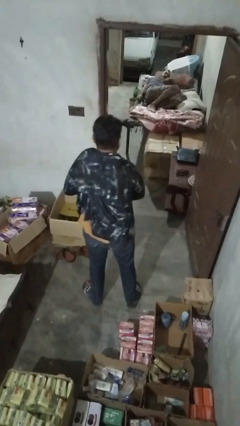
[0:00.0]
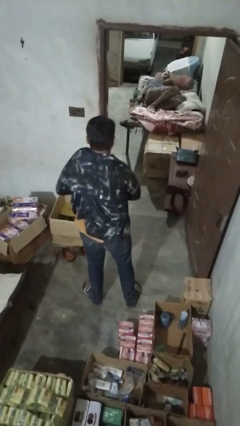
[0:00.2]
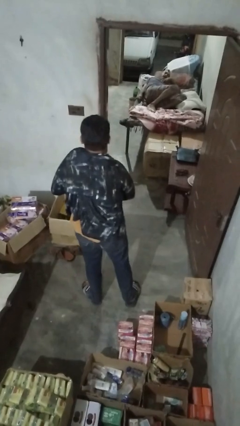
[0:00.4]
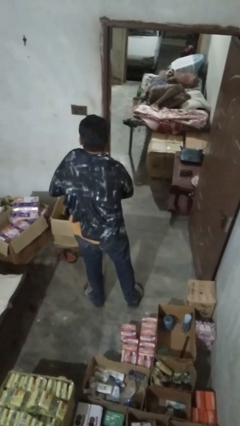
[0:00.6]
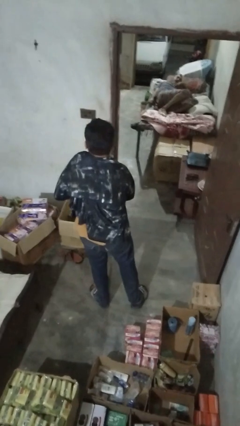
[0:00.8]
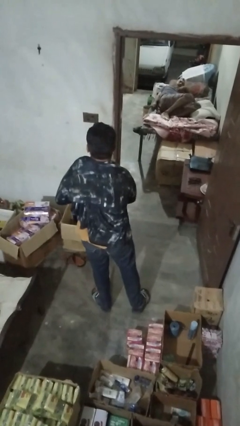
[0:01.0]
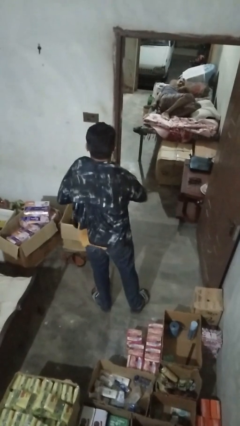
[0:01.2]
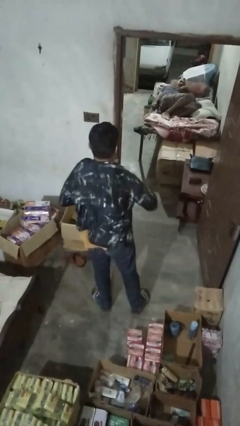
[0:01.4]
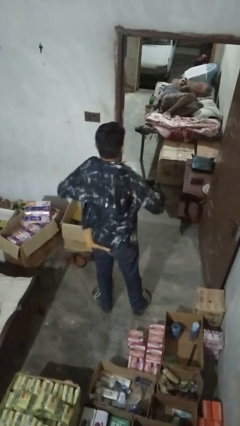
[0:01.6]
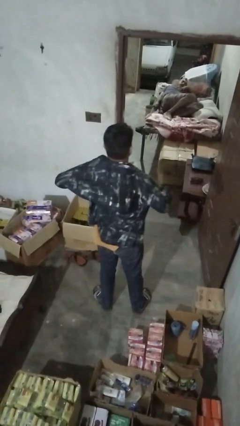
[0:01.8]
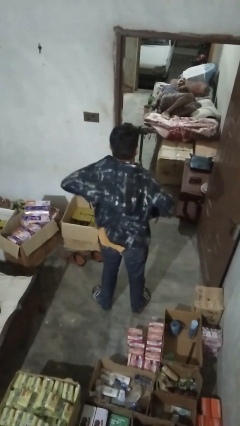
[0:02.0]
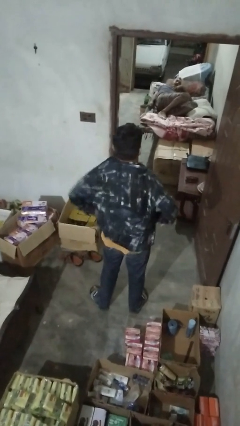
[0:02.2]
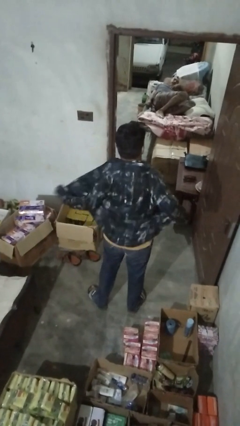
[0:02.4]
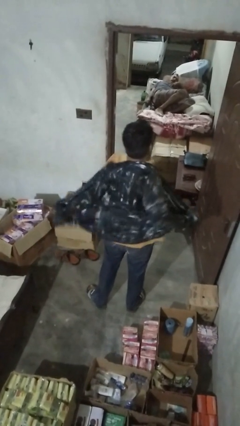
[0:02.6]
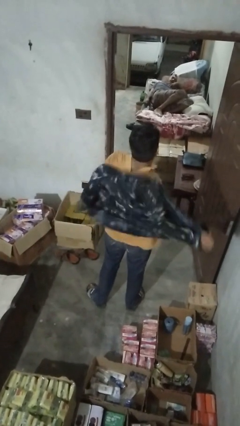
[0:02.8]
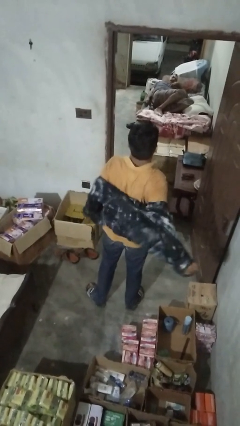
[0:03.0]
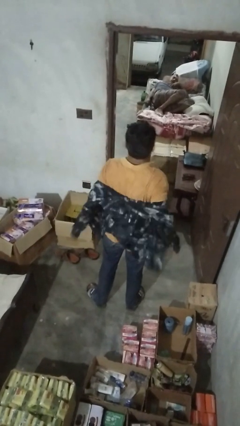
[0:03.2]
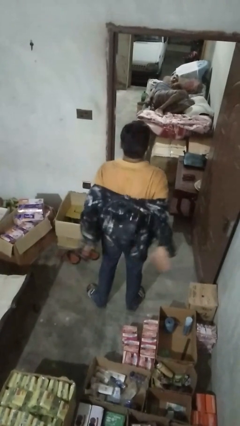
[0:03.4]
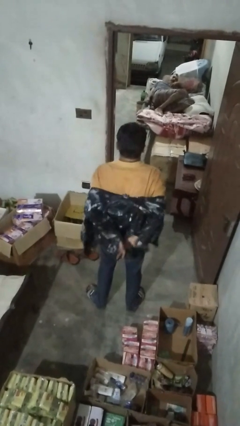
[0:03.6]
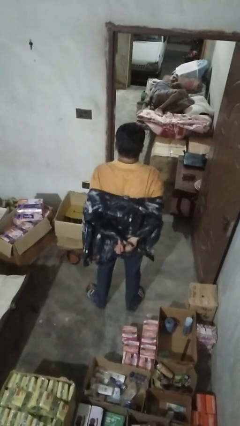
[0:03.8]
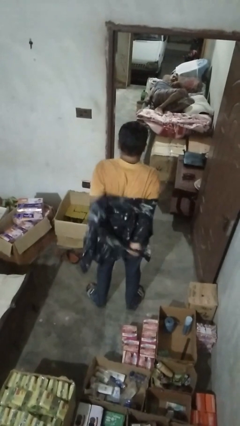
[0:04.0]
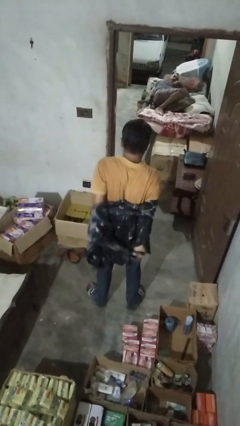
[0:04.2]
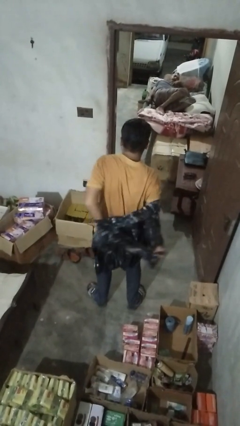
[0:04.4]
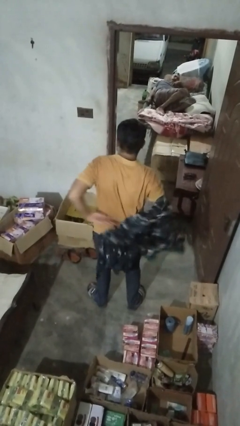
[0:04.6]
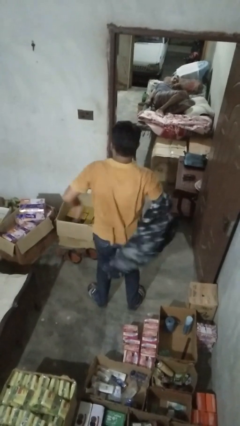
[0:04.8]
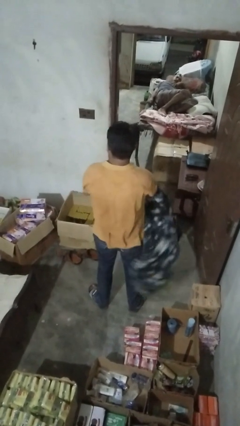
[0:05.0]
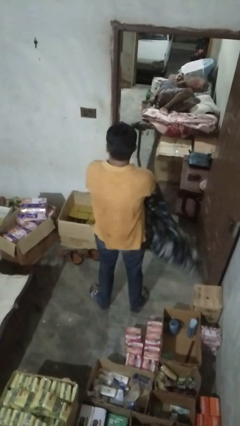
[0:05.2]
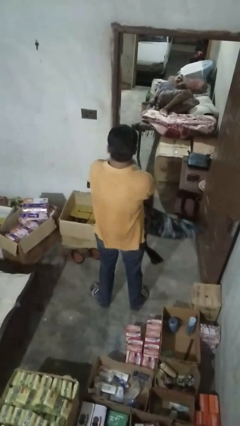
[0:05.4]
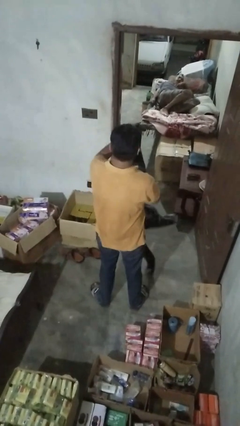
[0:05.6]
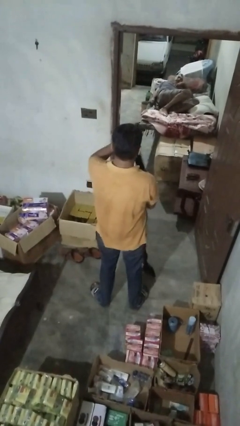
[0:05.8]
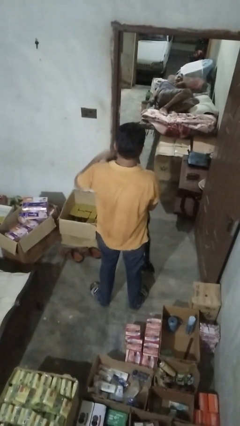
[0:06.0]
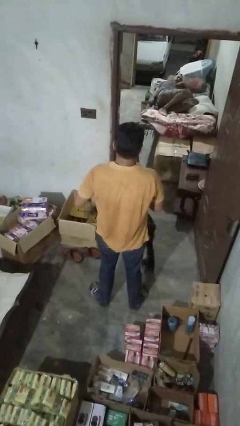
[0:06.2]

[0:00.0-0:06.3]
person takes off shirt

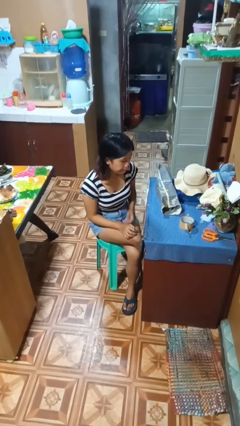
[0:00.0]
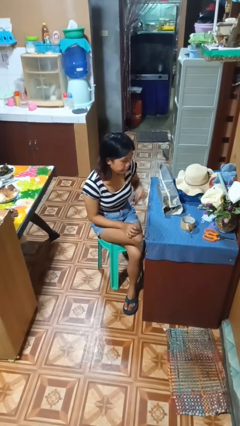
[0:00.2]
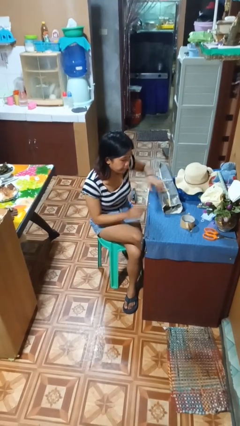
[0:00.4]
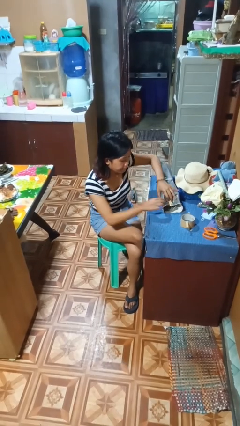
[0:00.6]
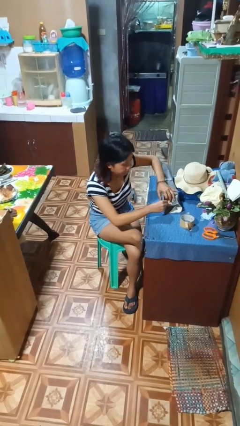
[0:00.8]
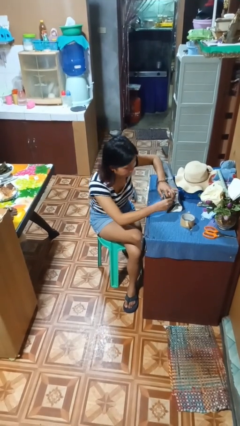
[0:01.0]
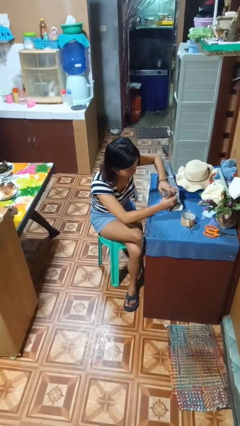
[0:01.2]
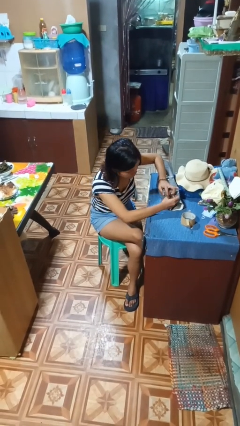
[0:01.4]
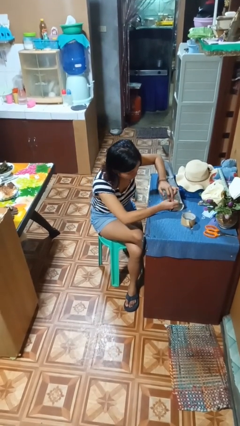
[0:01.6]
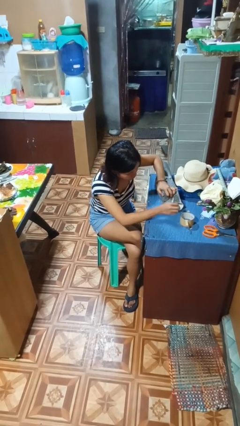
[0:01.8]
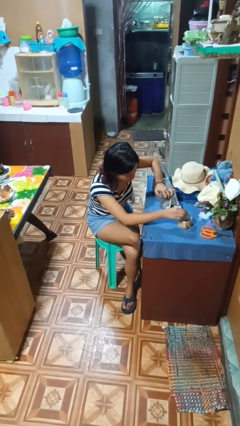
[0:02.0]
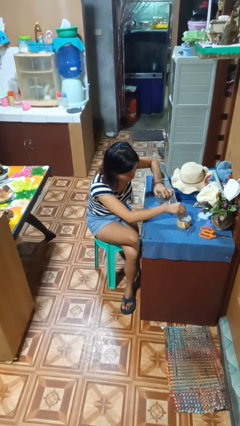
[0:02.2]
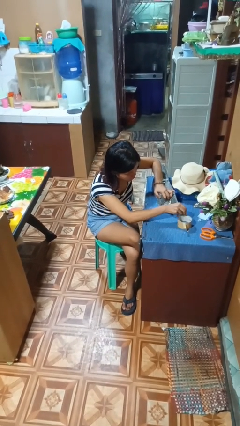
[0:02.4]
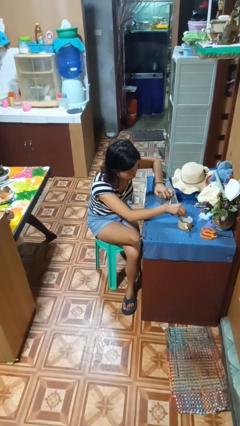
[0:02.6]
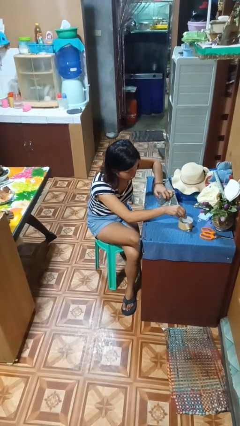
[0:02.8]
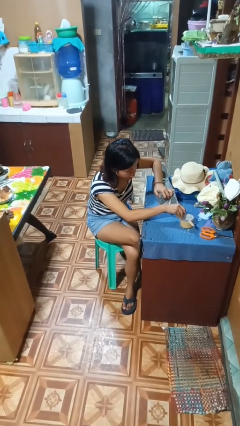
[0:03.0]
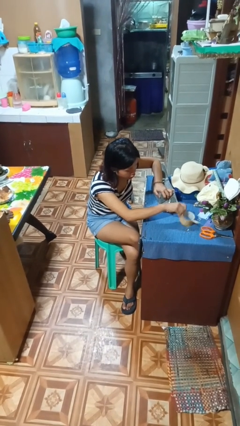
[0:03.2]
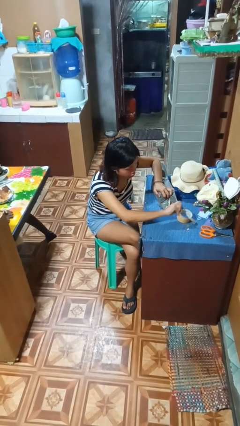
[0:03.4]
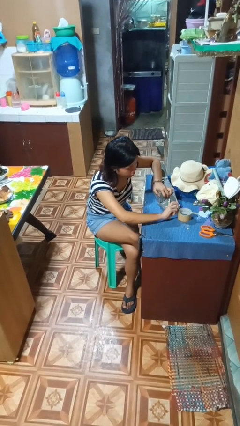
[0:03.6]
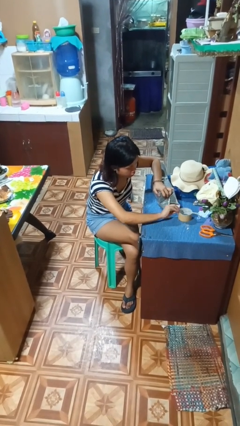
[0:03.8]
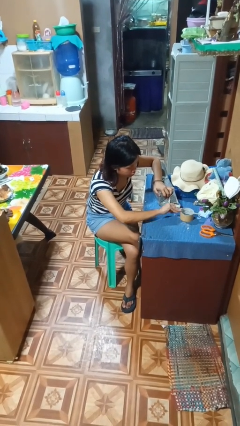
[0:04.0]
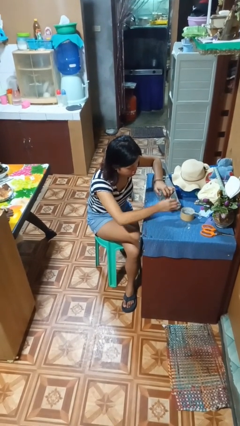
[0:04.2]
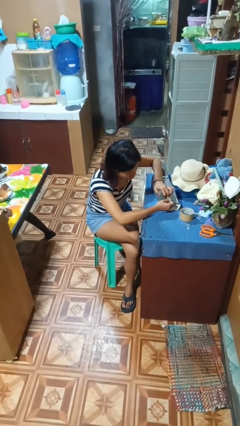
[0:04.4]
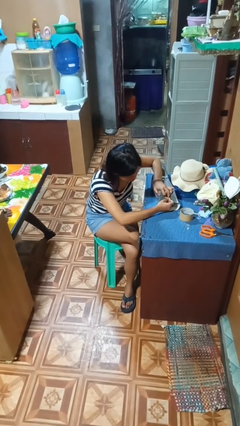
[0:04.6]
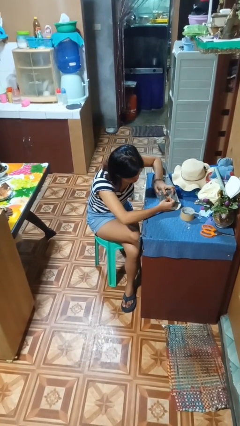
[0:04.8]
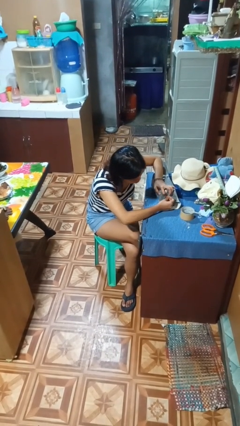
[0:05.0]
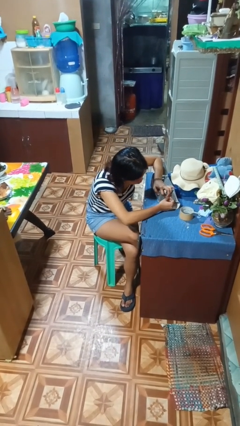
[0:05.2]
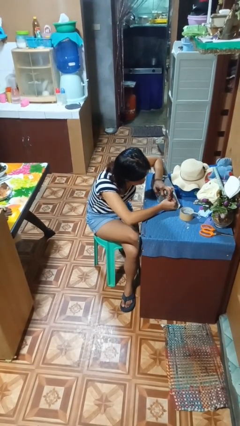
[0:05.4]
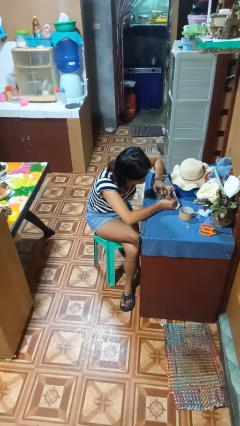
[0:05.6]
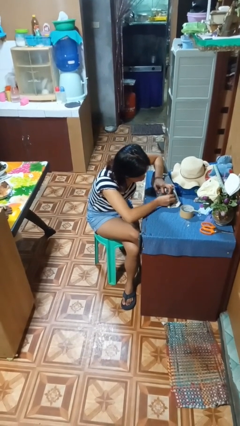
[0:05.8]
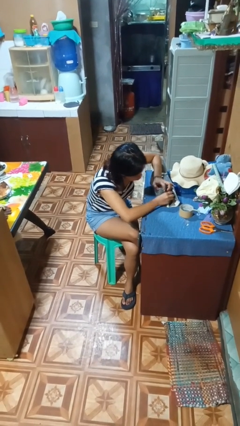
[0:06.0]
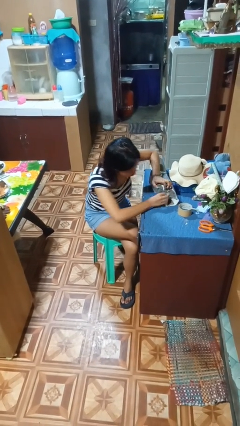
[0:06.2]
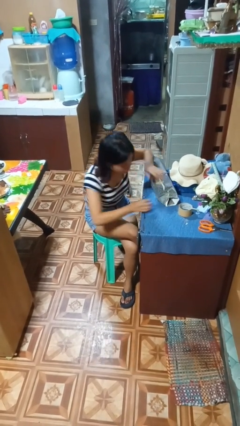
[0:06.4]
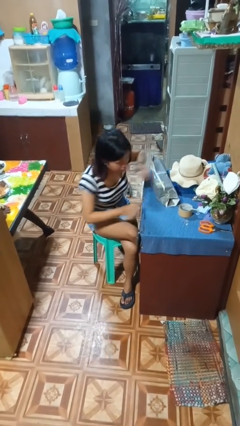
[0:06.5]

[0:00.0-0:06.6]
person wraps box

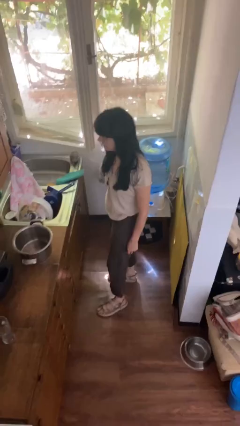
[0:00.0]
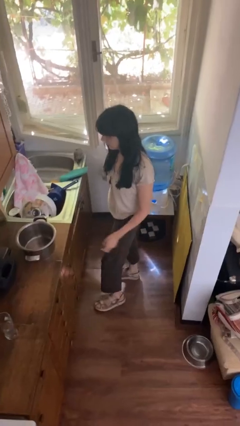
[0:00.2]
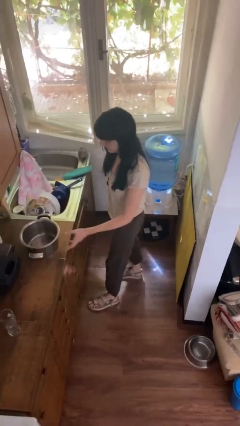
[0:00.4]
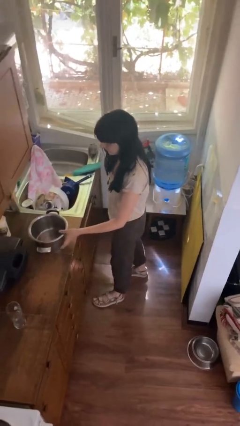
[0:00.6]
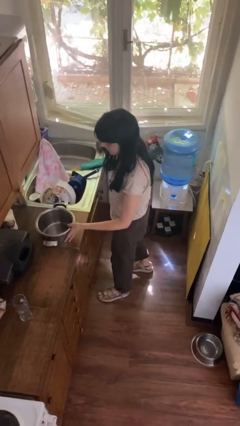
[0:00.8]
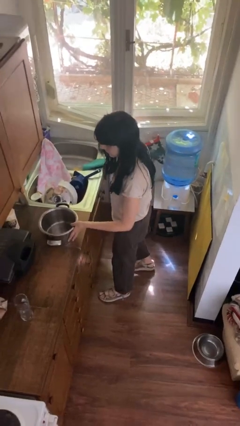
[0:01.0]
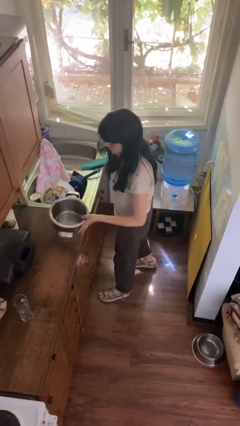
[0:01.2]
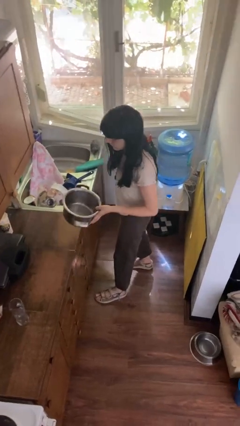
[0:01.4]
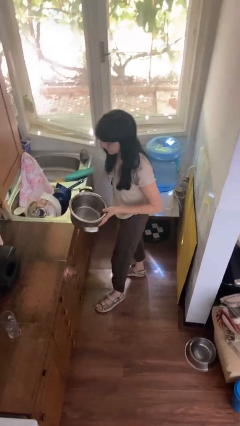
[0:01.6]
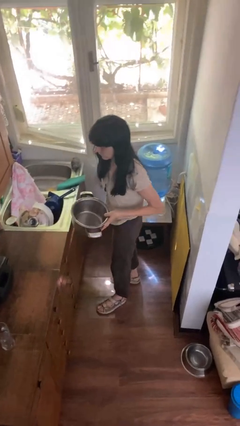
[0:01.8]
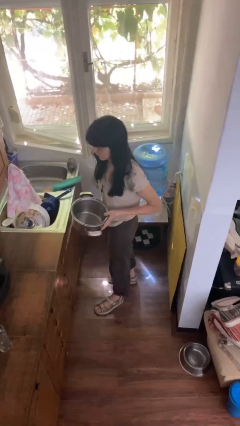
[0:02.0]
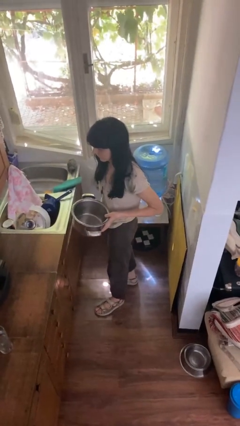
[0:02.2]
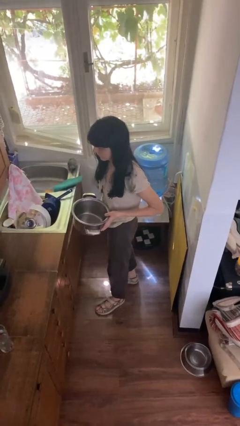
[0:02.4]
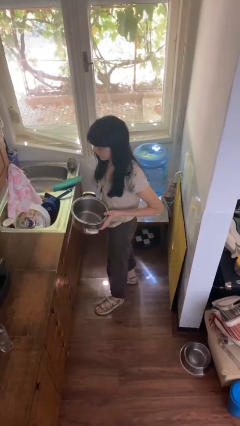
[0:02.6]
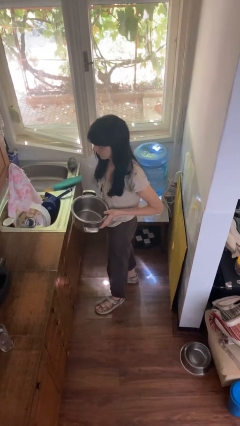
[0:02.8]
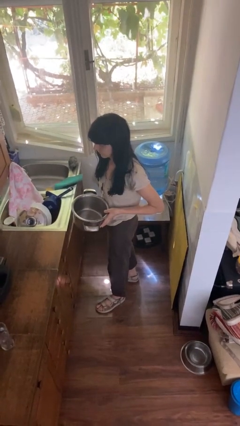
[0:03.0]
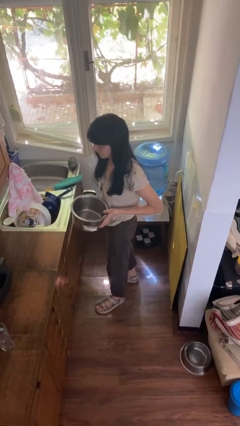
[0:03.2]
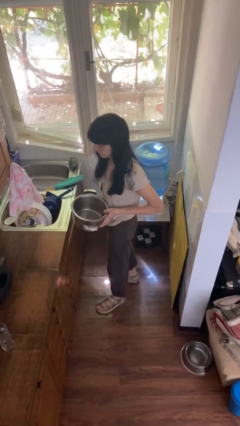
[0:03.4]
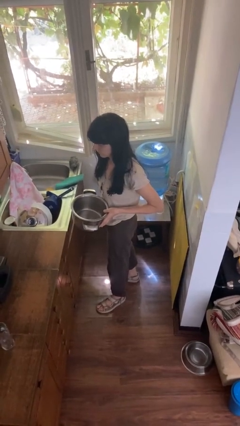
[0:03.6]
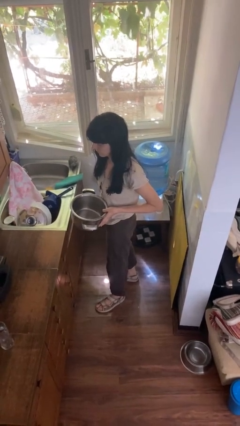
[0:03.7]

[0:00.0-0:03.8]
person picks up object from countertop

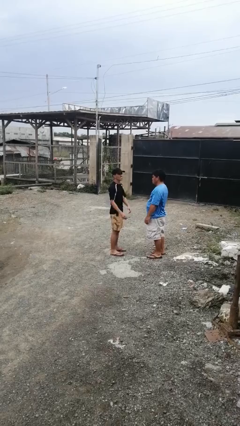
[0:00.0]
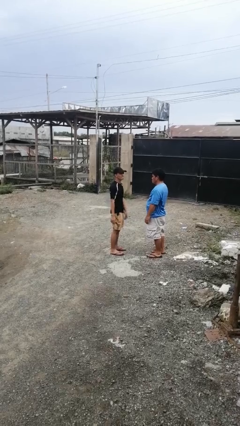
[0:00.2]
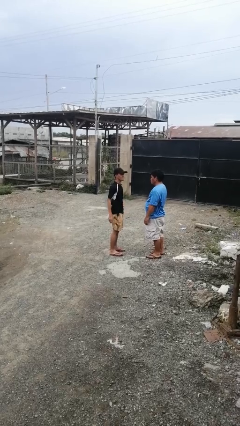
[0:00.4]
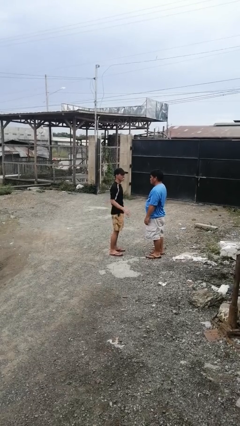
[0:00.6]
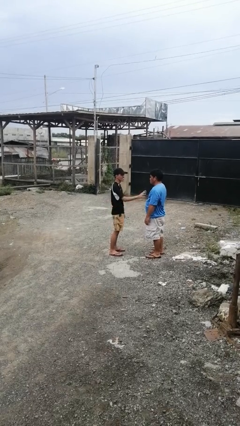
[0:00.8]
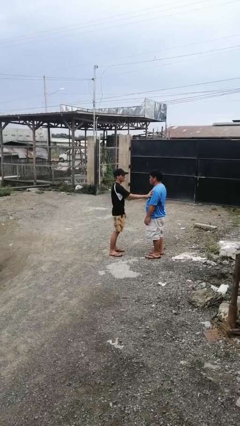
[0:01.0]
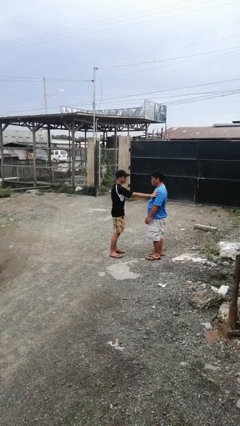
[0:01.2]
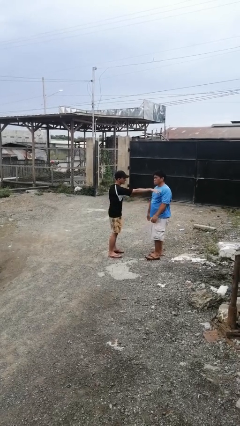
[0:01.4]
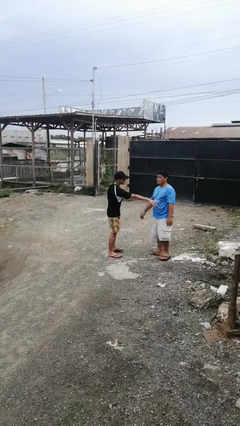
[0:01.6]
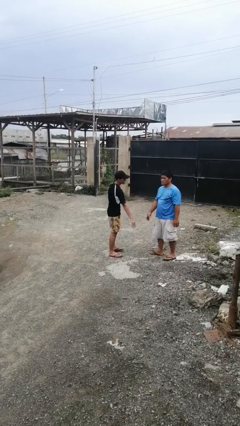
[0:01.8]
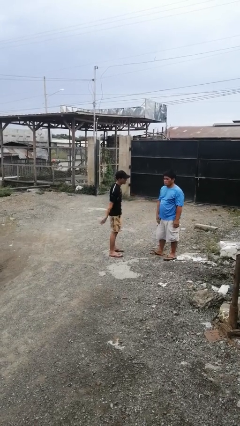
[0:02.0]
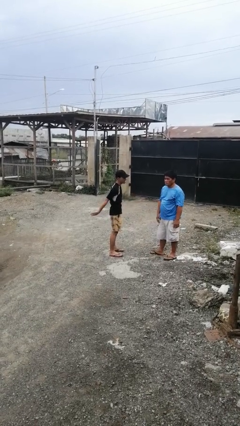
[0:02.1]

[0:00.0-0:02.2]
person shoves person
